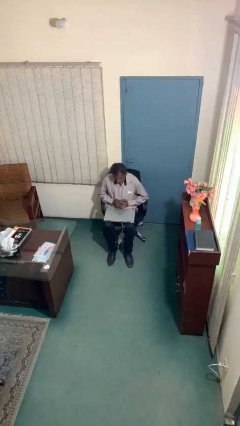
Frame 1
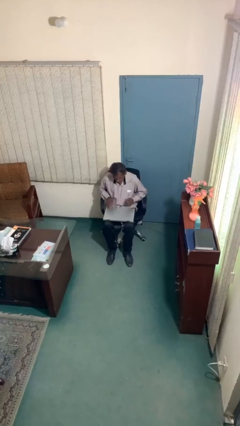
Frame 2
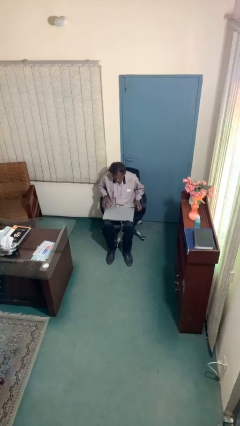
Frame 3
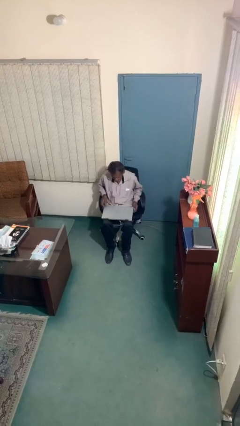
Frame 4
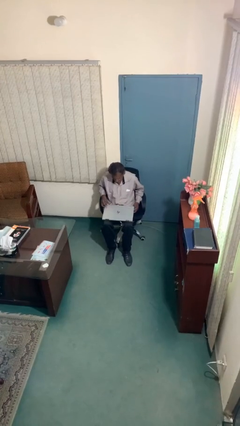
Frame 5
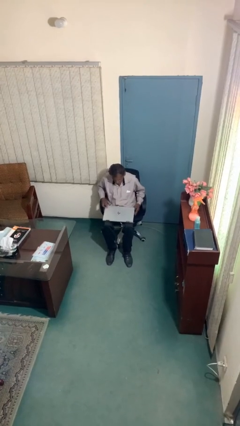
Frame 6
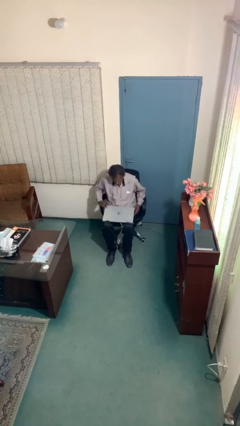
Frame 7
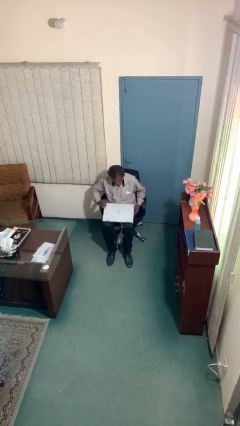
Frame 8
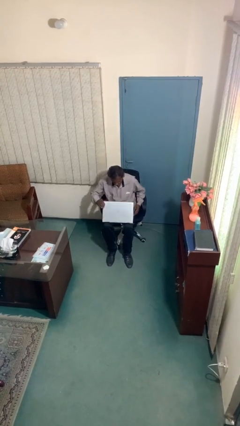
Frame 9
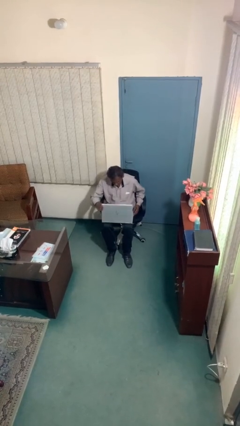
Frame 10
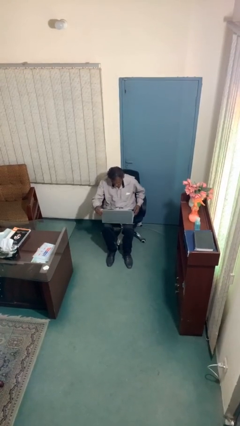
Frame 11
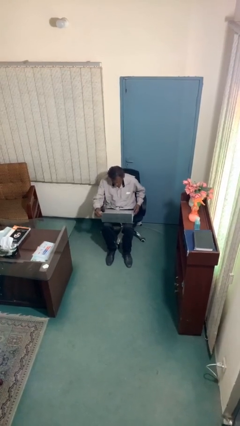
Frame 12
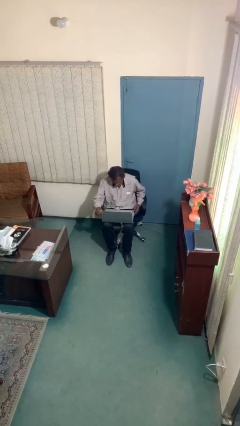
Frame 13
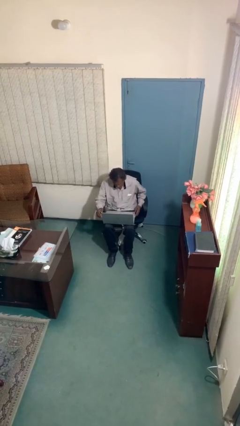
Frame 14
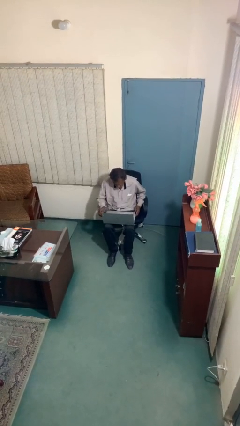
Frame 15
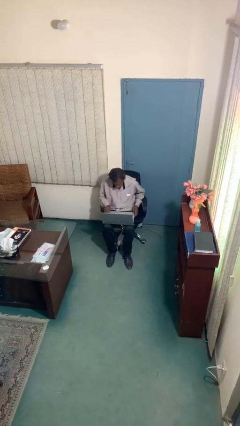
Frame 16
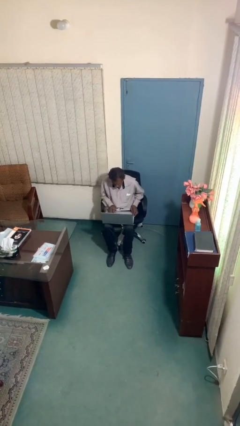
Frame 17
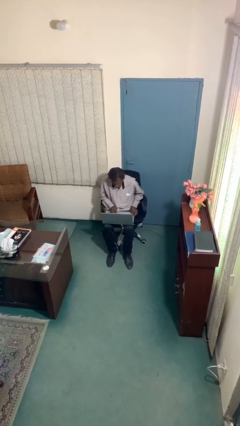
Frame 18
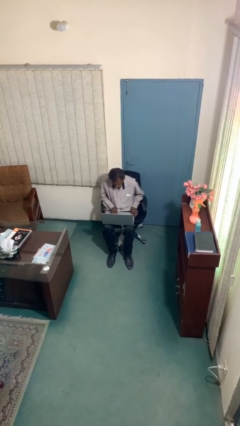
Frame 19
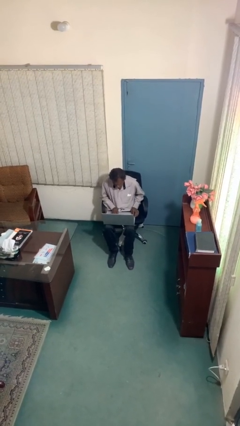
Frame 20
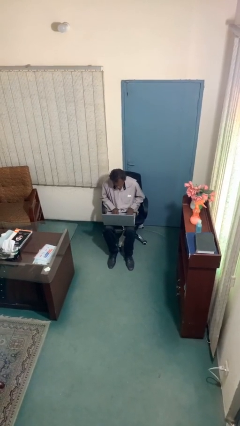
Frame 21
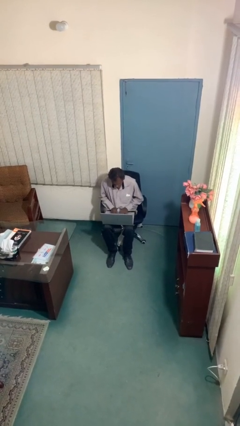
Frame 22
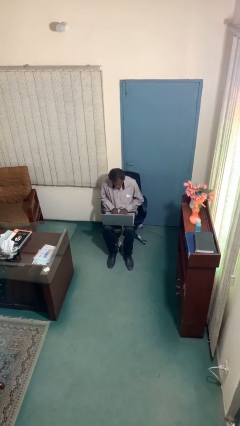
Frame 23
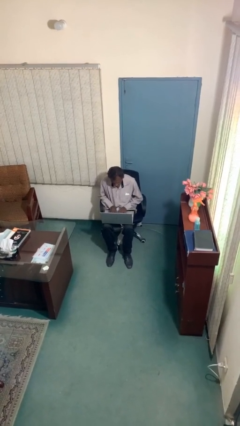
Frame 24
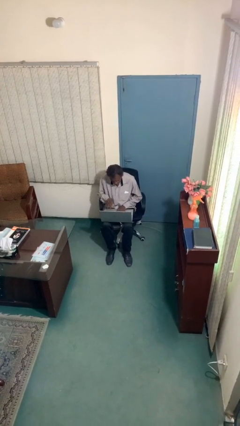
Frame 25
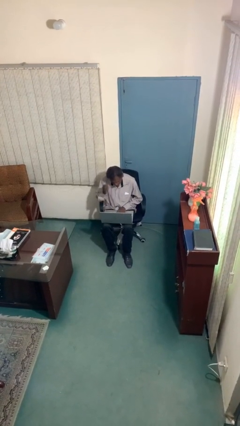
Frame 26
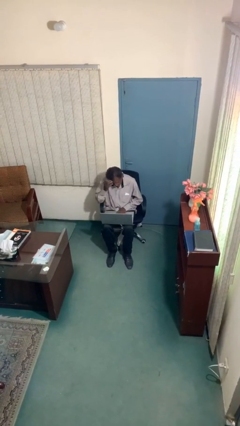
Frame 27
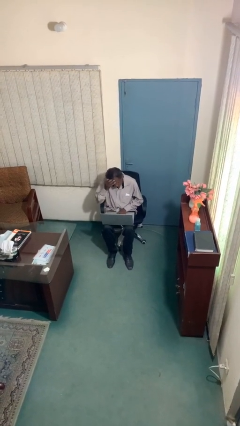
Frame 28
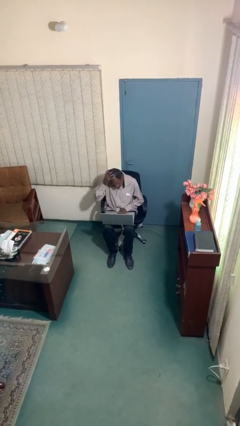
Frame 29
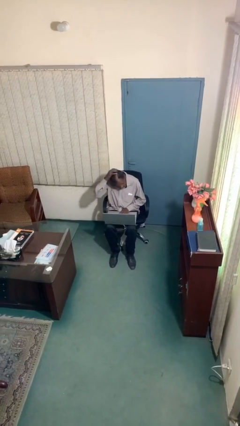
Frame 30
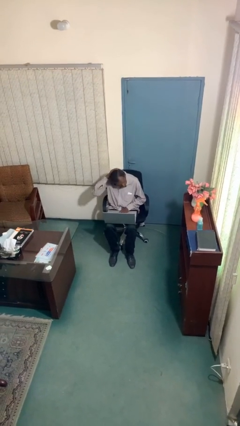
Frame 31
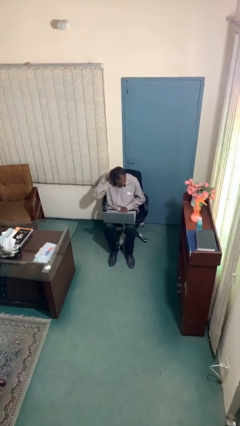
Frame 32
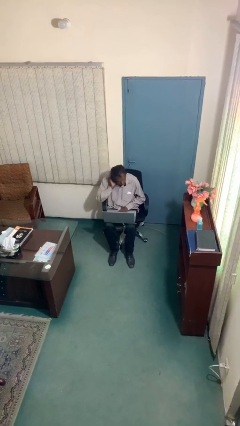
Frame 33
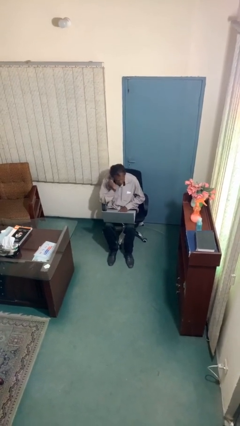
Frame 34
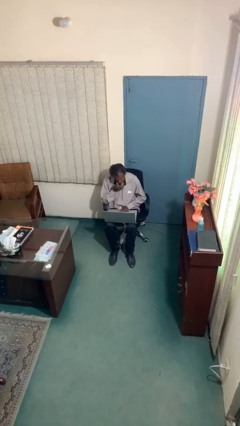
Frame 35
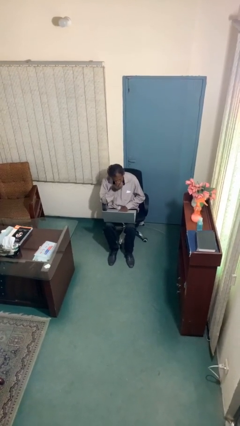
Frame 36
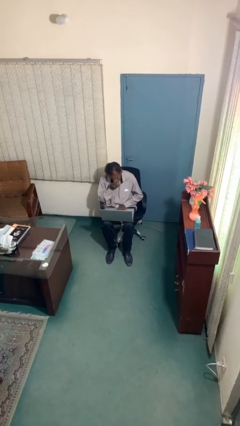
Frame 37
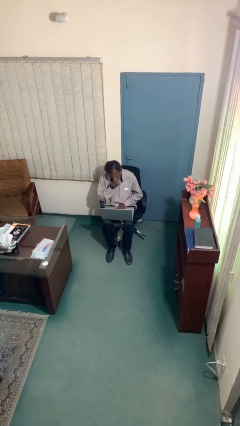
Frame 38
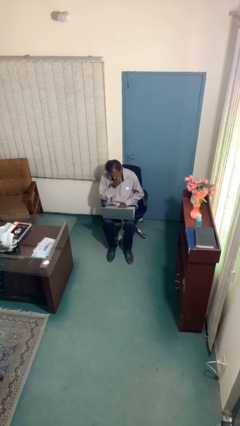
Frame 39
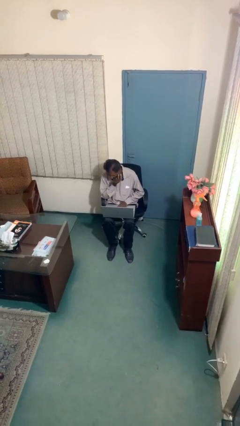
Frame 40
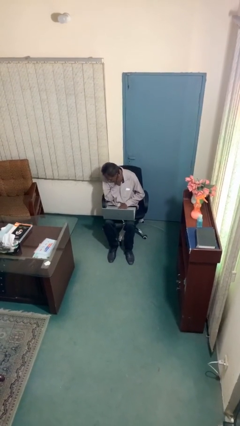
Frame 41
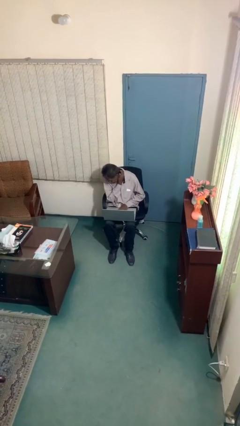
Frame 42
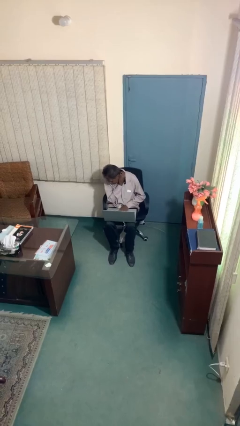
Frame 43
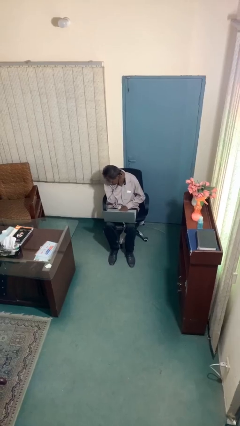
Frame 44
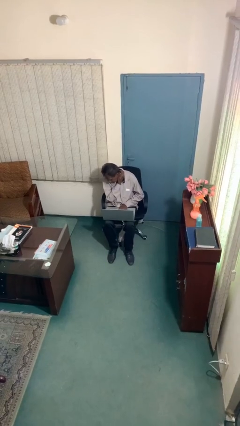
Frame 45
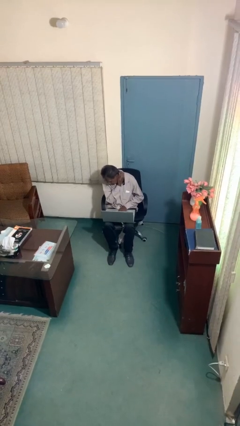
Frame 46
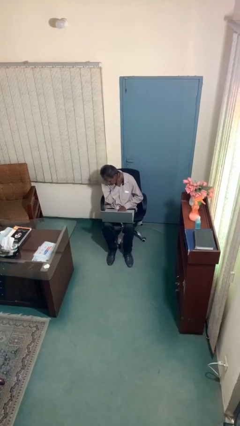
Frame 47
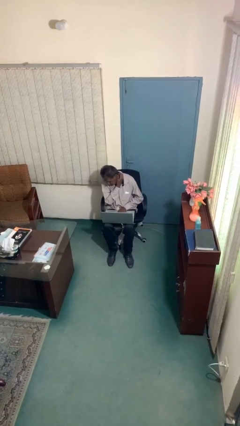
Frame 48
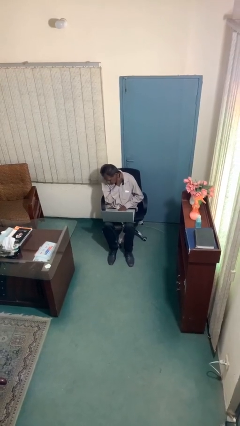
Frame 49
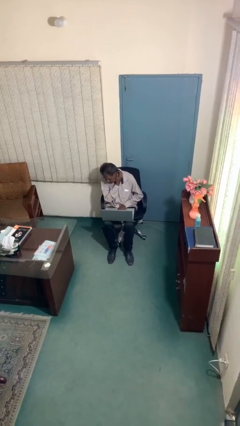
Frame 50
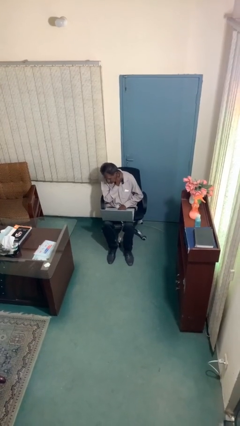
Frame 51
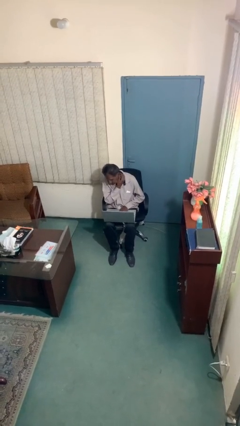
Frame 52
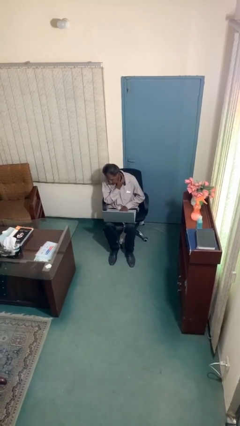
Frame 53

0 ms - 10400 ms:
person interacts with laptop

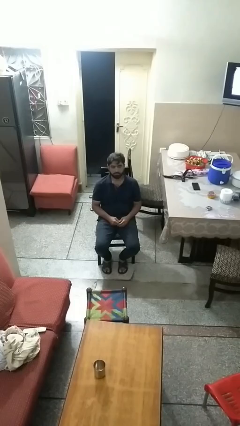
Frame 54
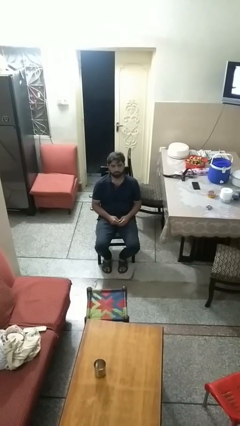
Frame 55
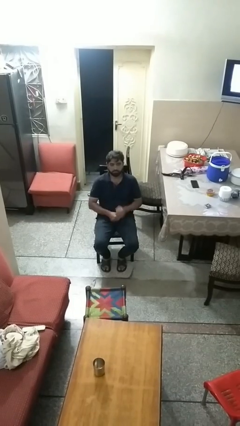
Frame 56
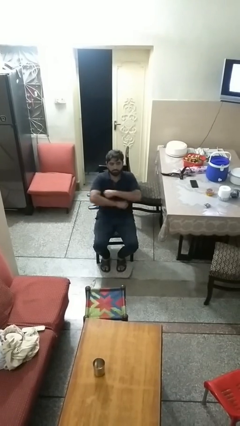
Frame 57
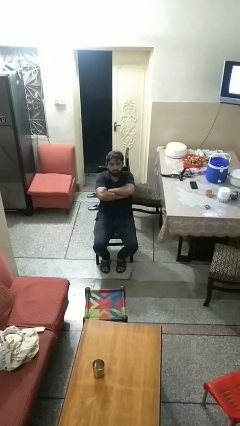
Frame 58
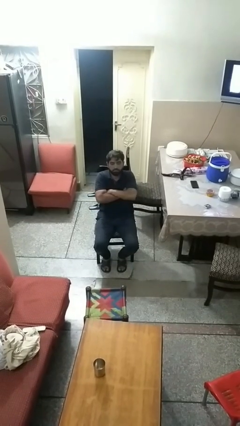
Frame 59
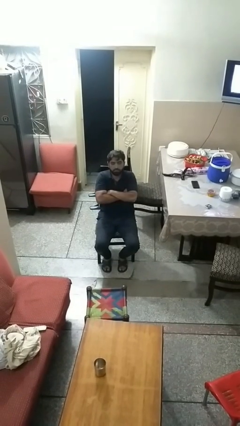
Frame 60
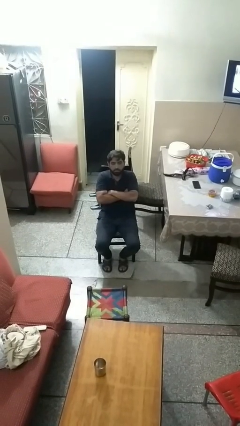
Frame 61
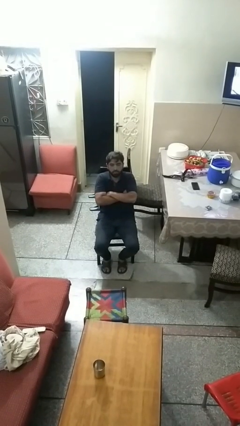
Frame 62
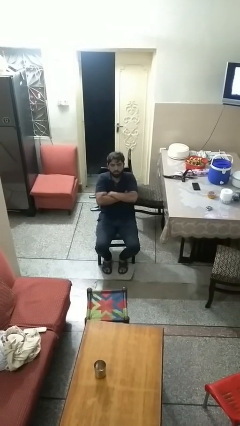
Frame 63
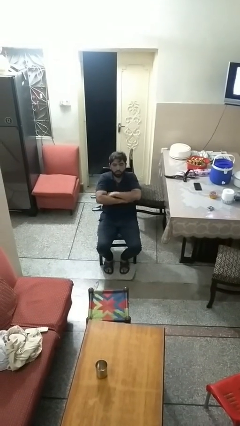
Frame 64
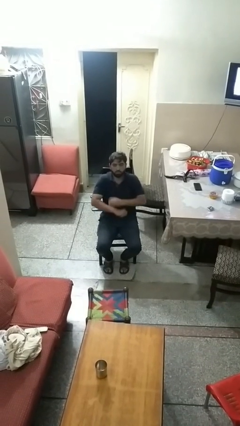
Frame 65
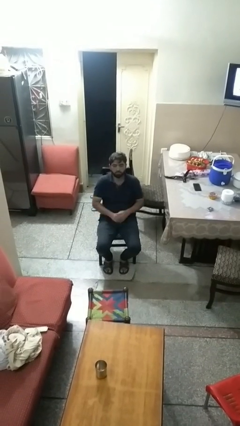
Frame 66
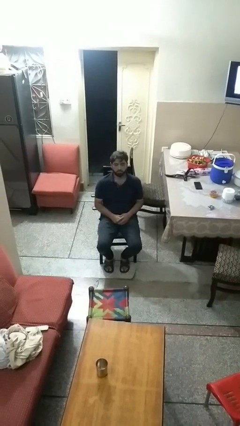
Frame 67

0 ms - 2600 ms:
person gestures arms x

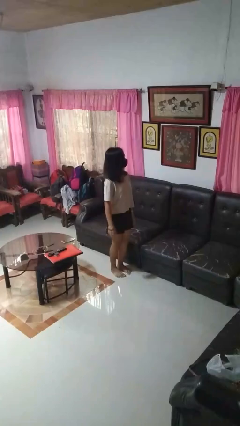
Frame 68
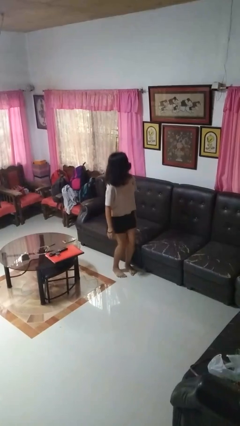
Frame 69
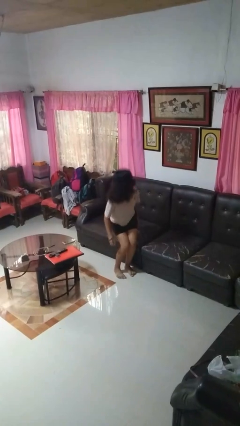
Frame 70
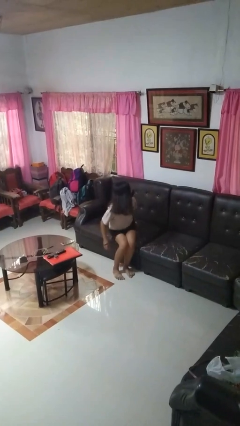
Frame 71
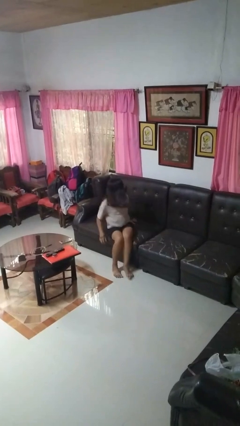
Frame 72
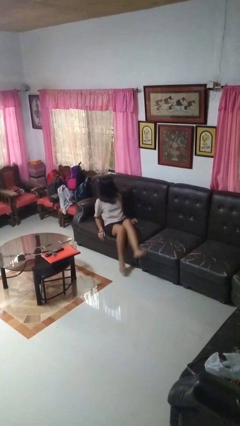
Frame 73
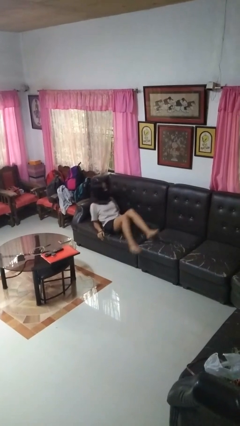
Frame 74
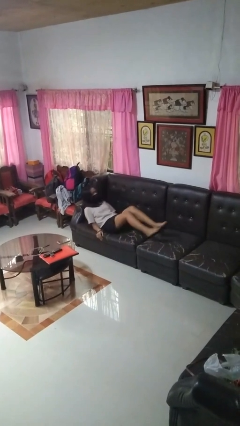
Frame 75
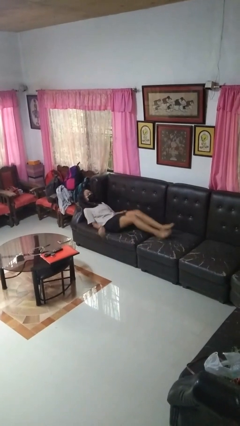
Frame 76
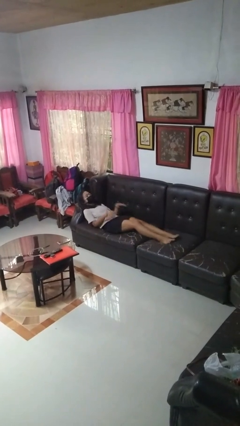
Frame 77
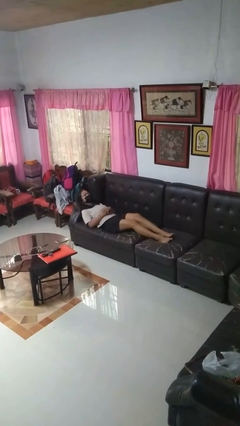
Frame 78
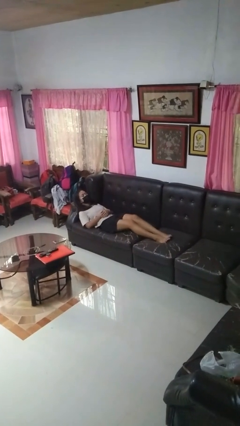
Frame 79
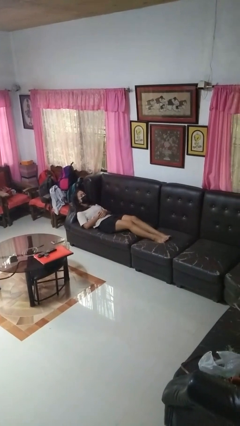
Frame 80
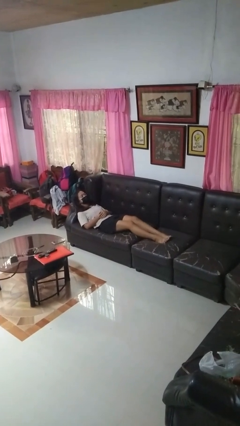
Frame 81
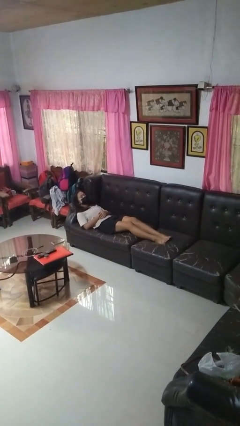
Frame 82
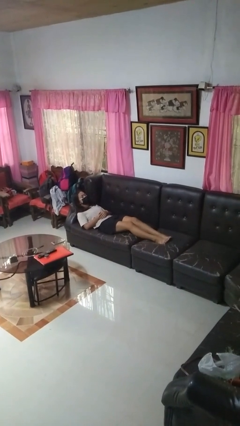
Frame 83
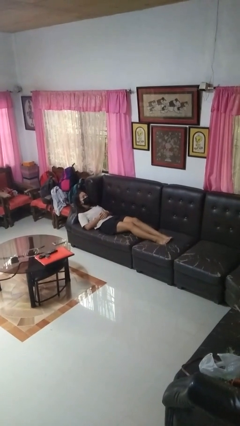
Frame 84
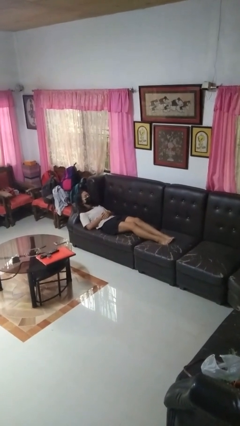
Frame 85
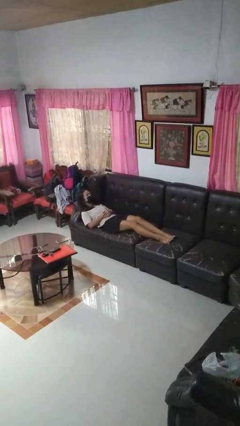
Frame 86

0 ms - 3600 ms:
person lies down on couch

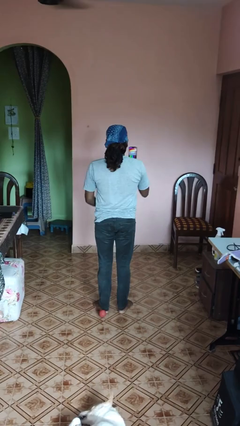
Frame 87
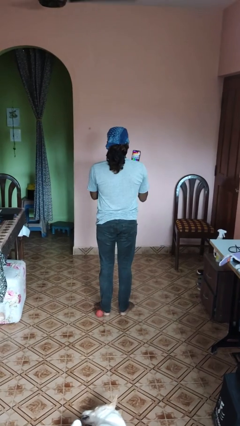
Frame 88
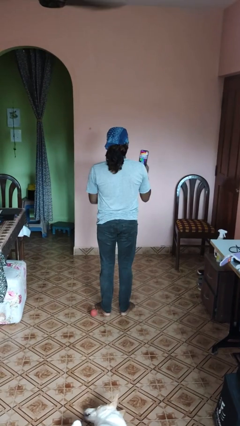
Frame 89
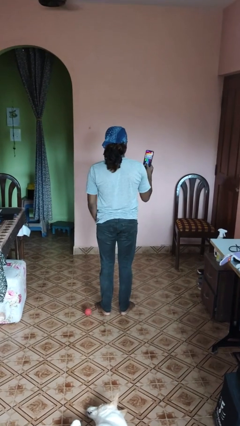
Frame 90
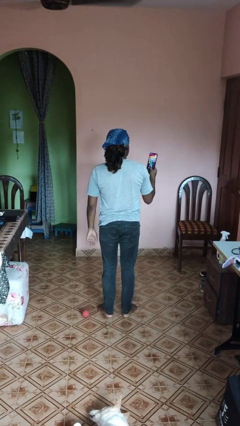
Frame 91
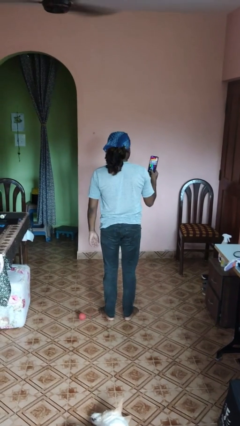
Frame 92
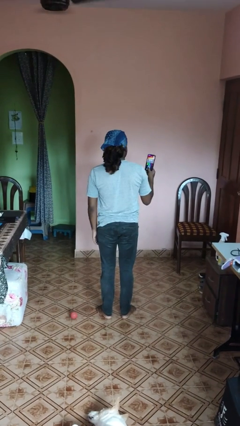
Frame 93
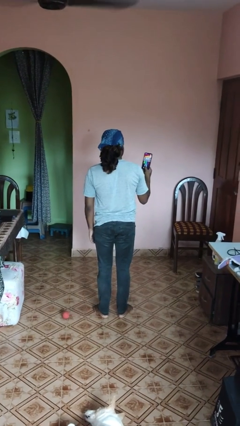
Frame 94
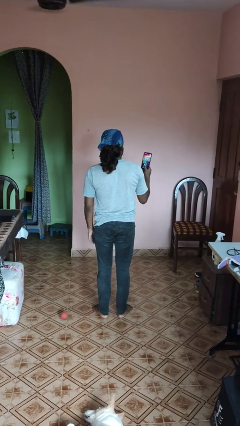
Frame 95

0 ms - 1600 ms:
person takes phone from pocket
